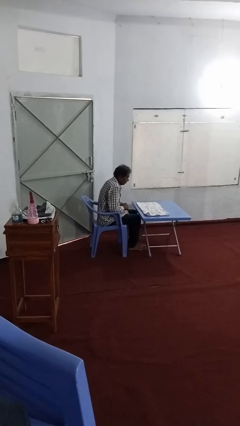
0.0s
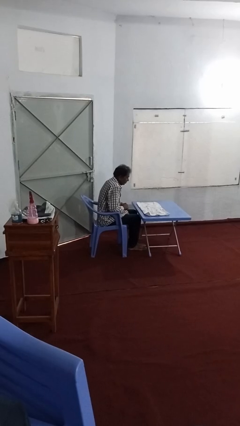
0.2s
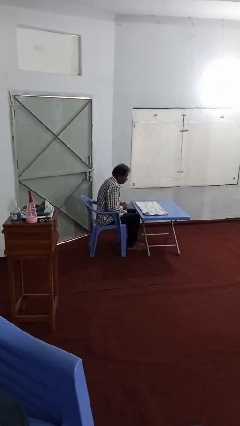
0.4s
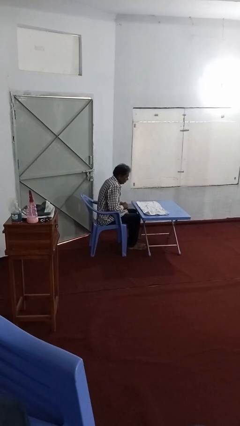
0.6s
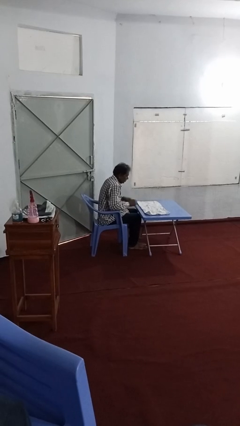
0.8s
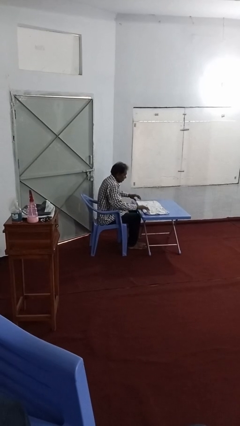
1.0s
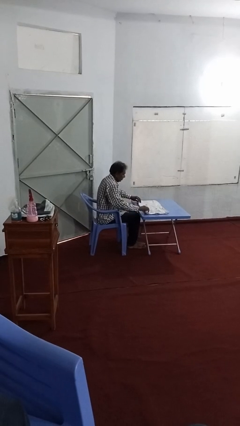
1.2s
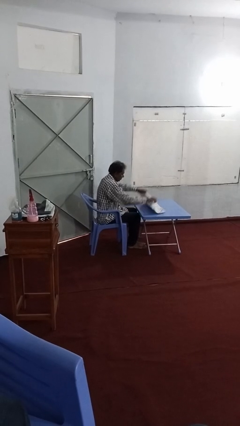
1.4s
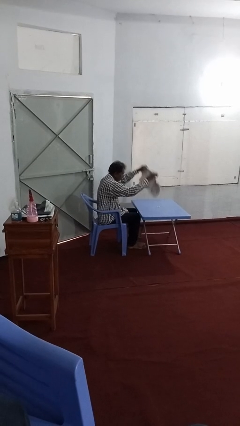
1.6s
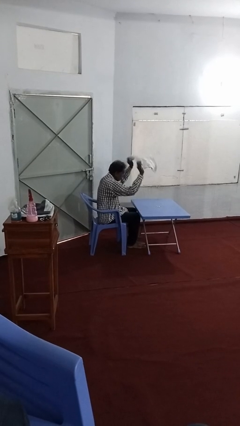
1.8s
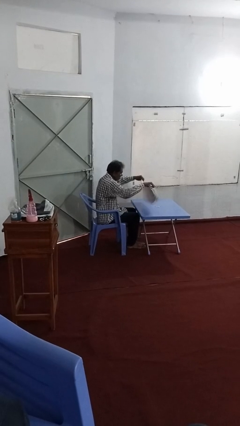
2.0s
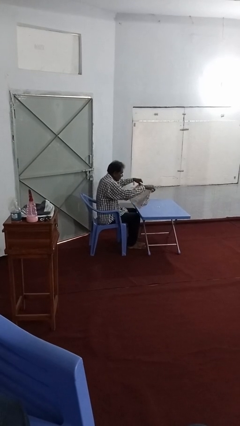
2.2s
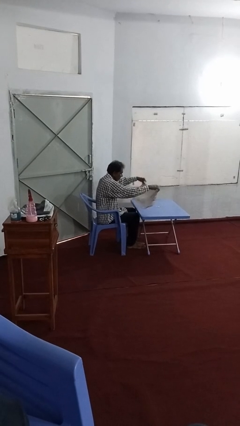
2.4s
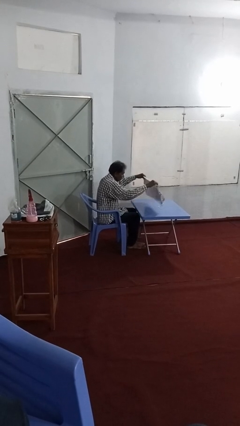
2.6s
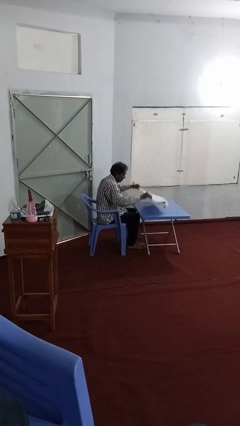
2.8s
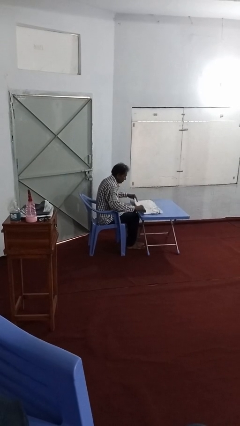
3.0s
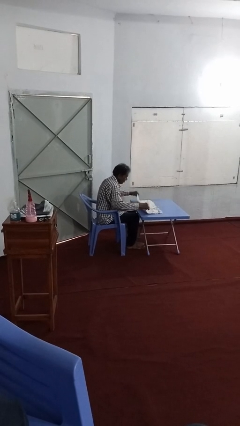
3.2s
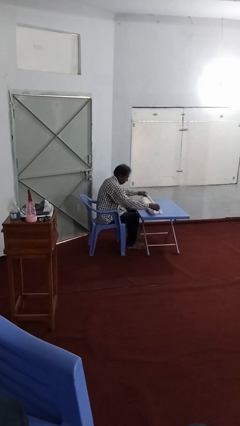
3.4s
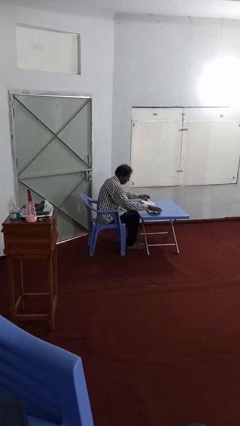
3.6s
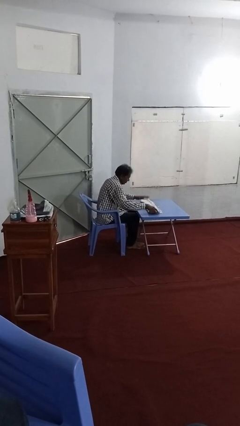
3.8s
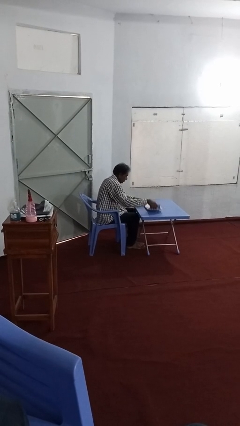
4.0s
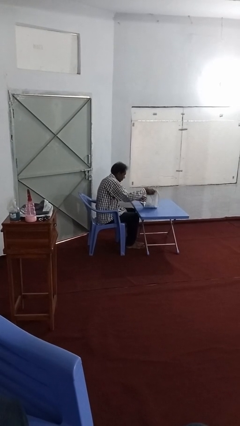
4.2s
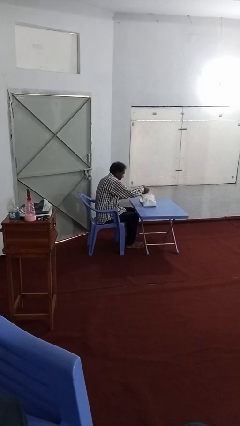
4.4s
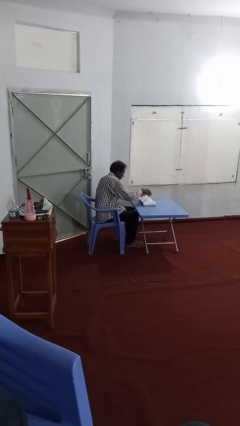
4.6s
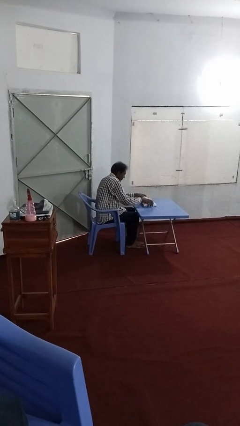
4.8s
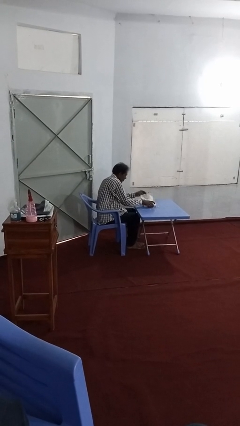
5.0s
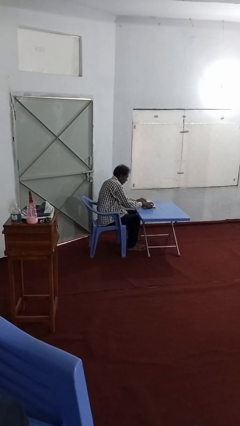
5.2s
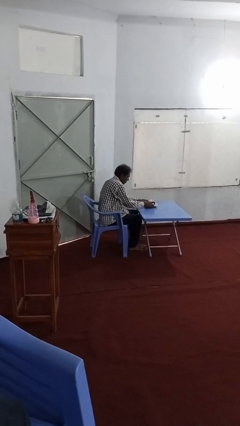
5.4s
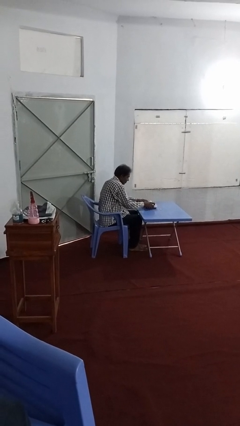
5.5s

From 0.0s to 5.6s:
person folds towel

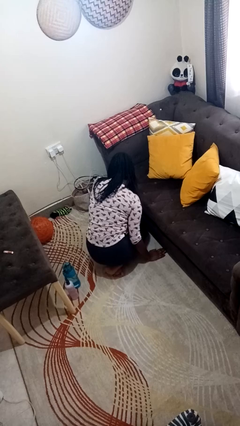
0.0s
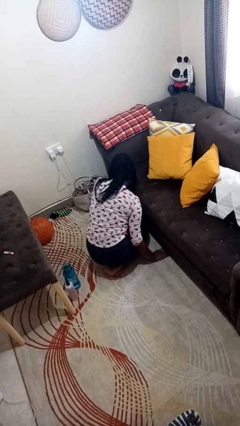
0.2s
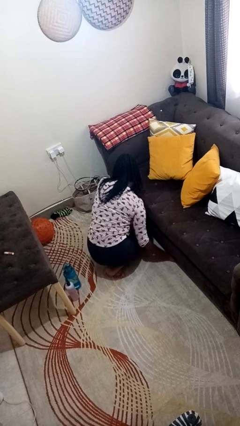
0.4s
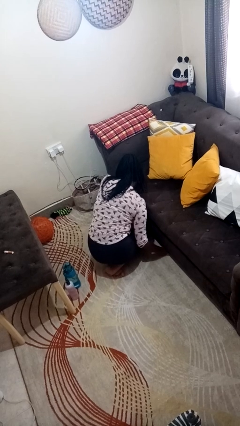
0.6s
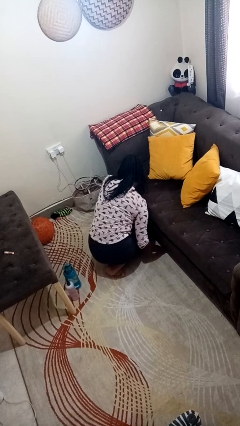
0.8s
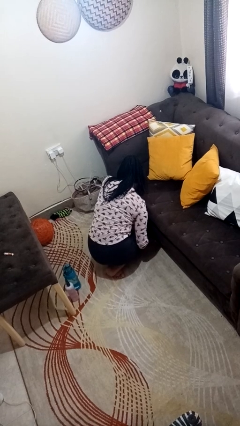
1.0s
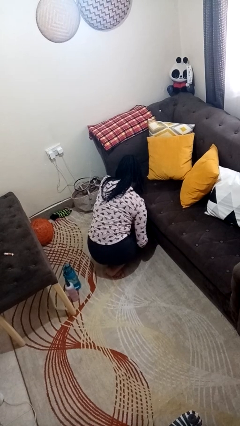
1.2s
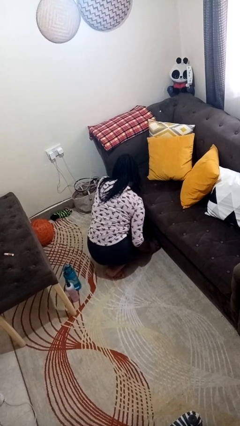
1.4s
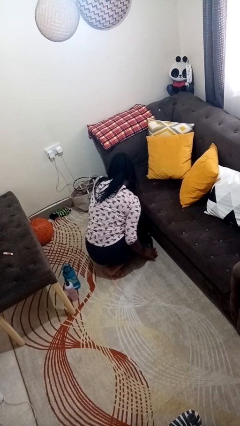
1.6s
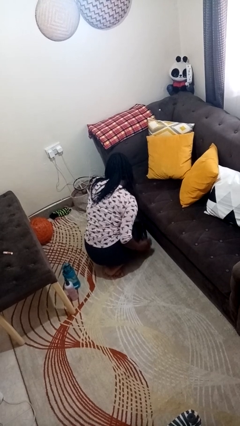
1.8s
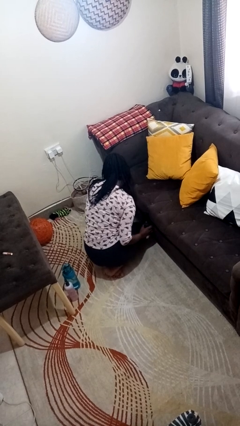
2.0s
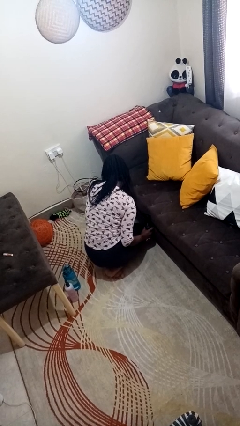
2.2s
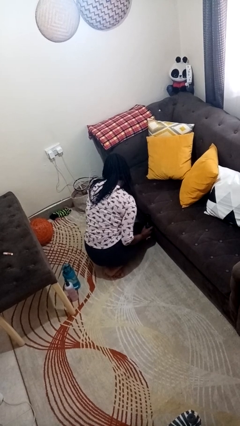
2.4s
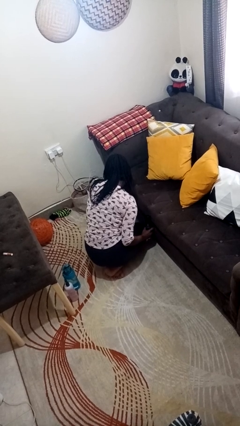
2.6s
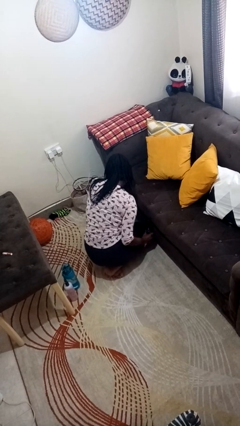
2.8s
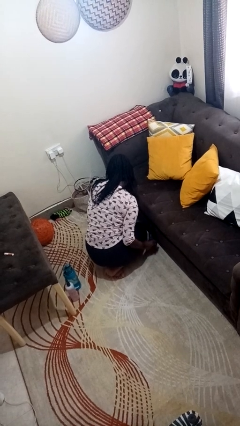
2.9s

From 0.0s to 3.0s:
person searches under couch

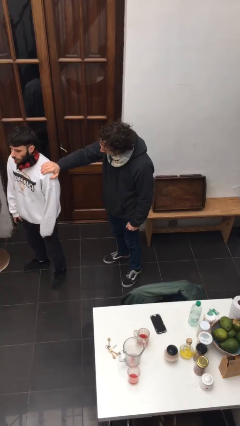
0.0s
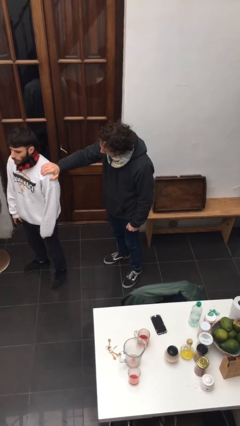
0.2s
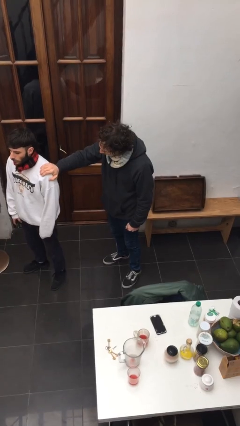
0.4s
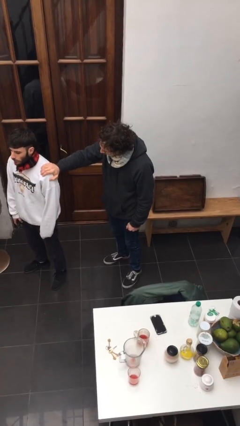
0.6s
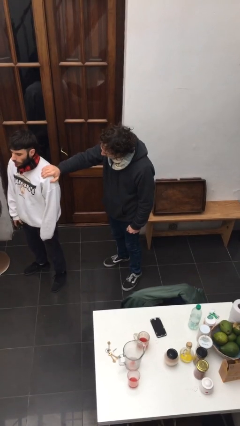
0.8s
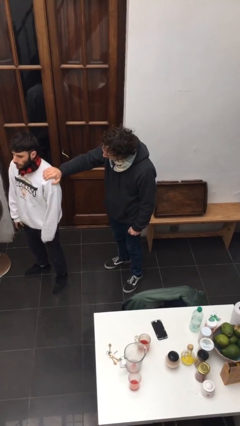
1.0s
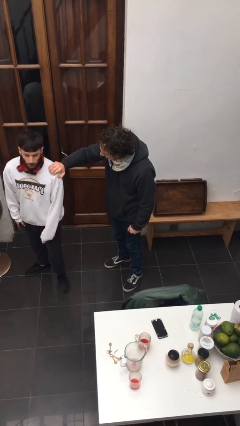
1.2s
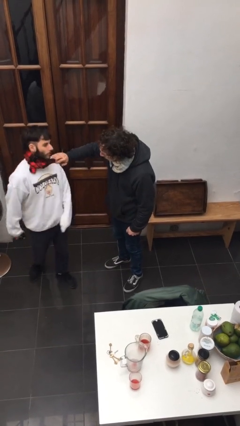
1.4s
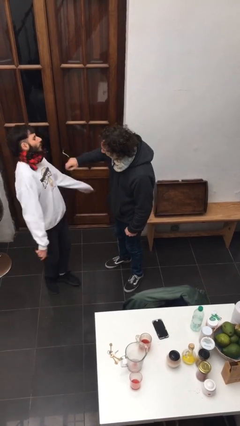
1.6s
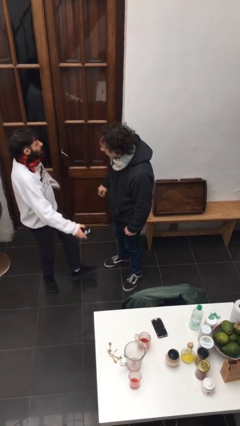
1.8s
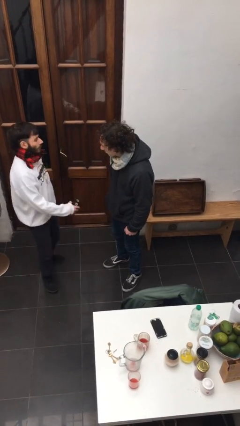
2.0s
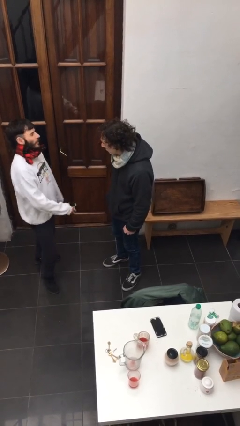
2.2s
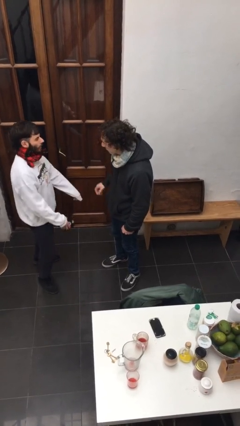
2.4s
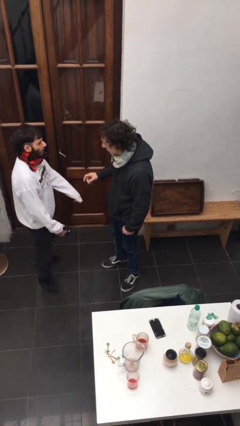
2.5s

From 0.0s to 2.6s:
person spins person around

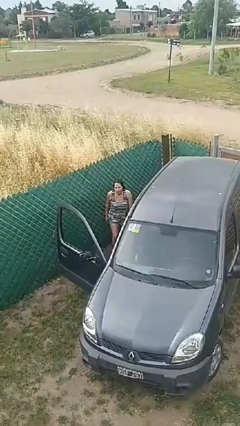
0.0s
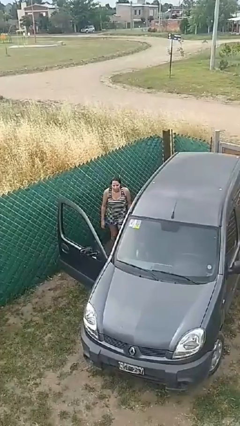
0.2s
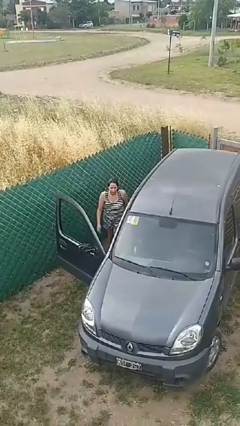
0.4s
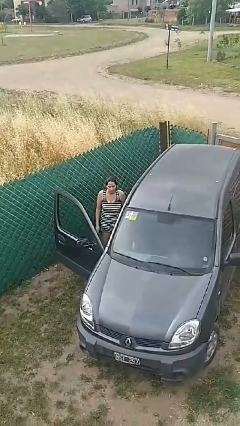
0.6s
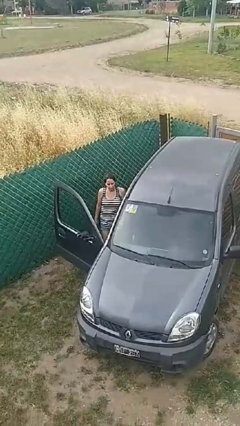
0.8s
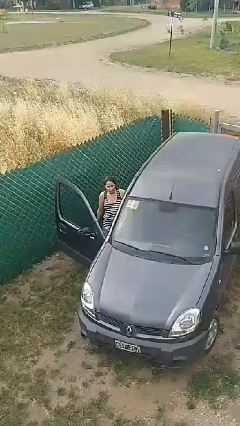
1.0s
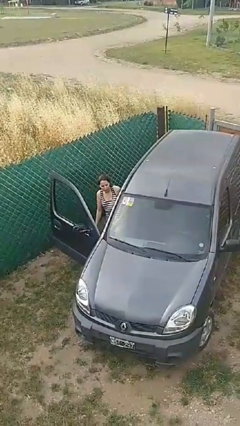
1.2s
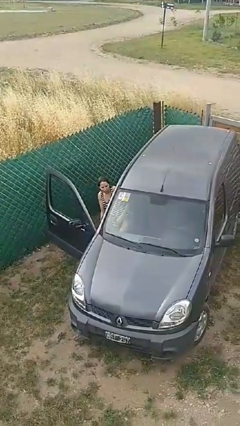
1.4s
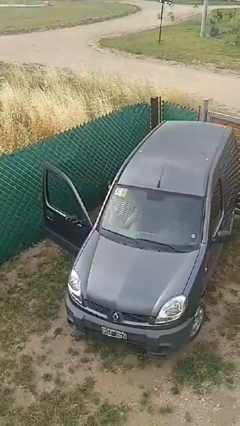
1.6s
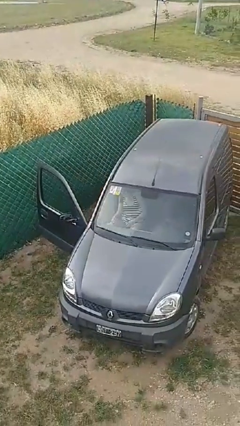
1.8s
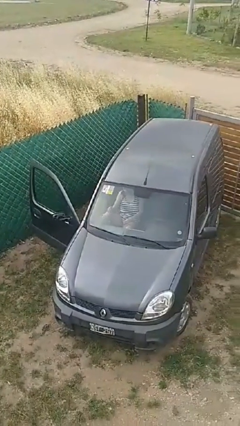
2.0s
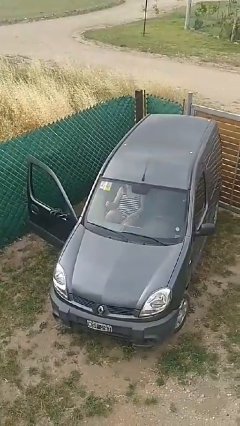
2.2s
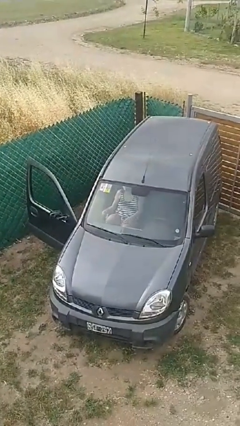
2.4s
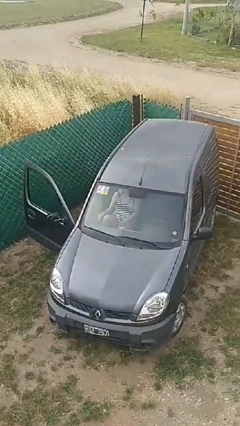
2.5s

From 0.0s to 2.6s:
person enters car

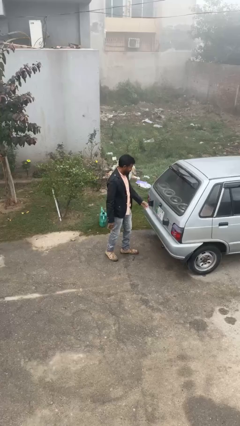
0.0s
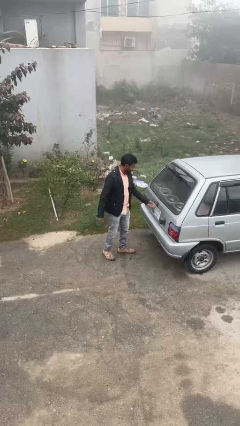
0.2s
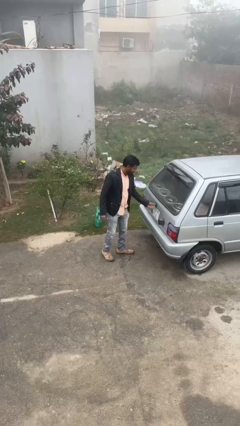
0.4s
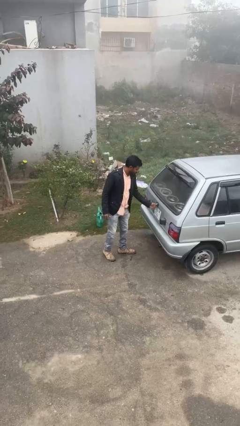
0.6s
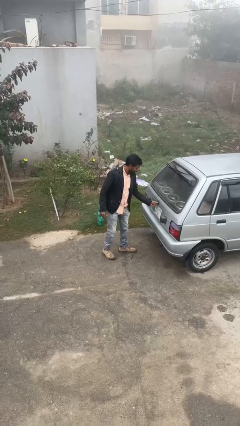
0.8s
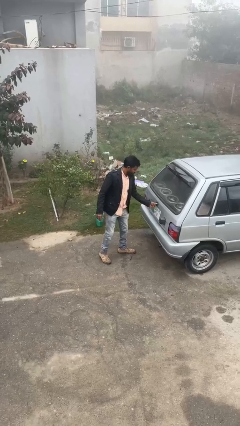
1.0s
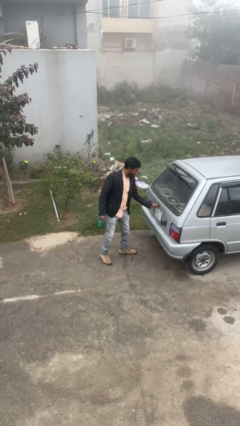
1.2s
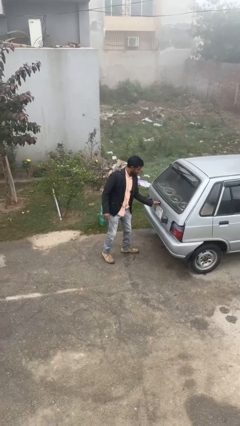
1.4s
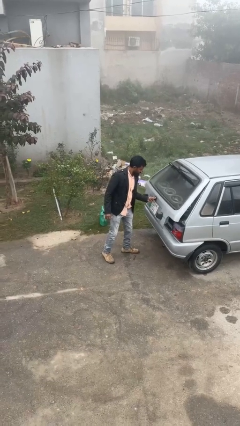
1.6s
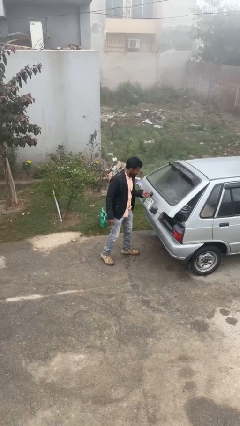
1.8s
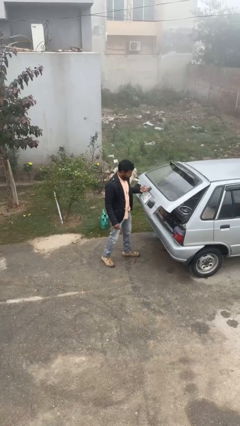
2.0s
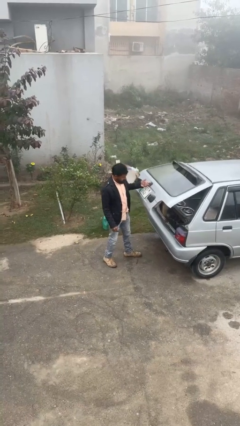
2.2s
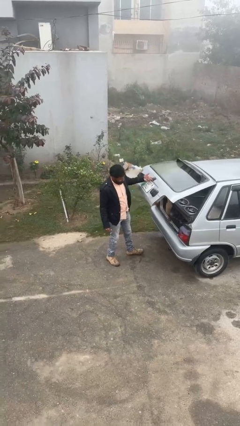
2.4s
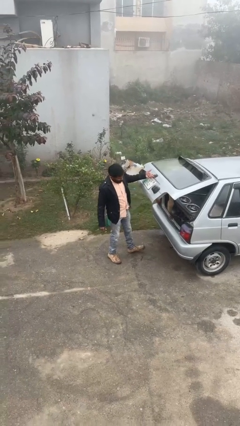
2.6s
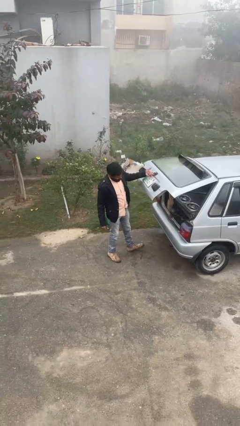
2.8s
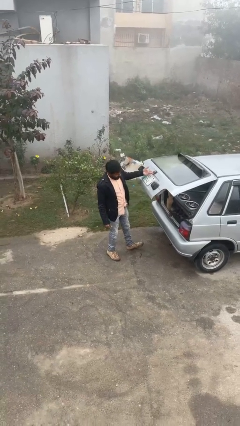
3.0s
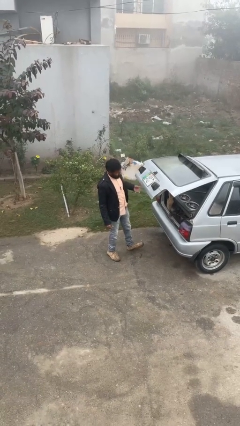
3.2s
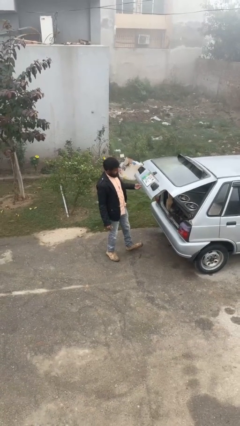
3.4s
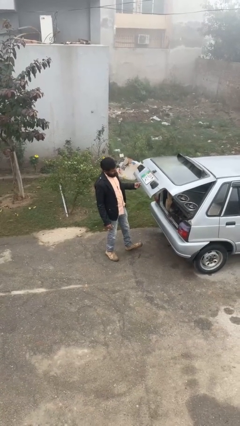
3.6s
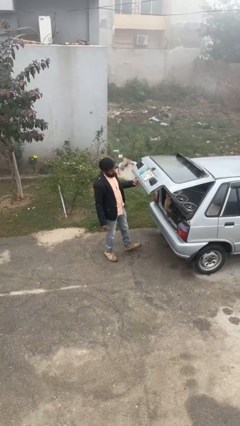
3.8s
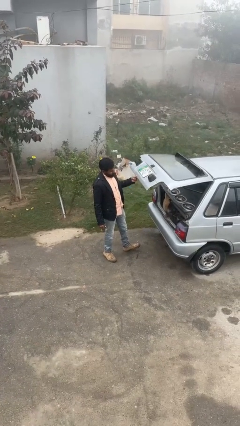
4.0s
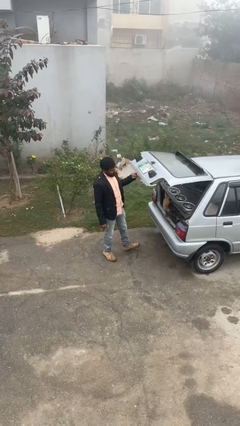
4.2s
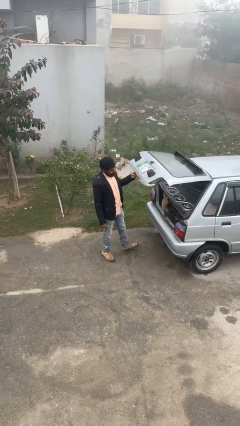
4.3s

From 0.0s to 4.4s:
person opens car trunk
